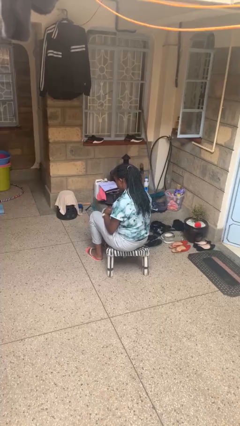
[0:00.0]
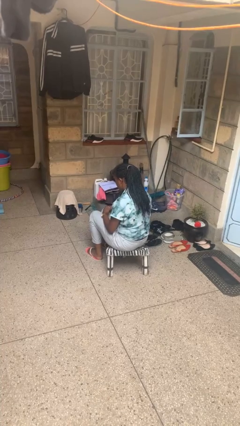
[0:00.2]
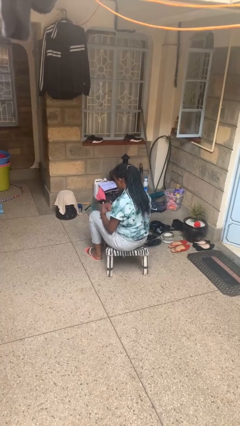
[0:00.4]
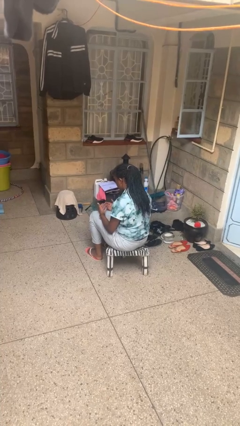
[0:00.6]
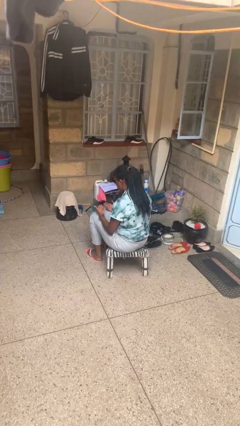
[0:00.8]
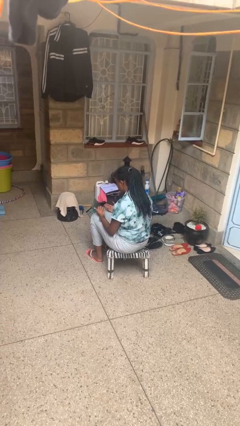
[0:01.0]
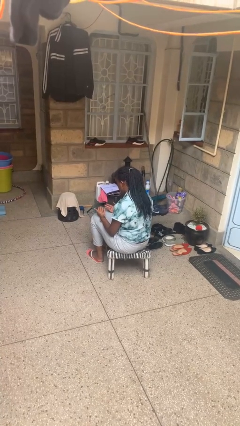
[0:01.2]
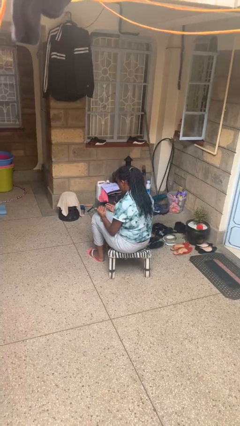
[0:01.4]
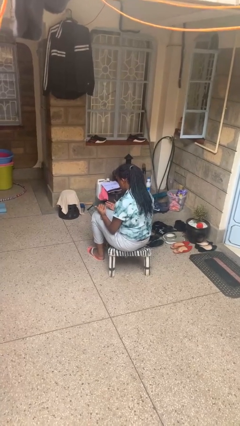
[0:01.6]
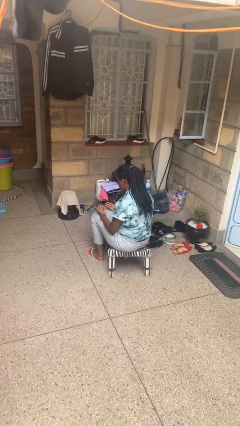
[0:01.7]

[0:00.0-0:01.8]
person looks at hands in lap

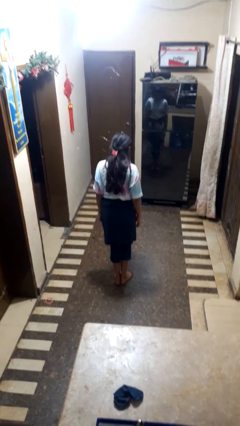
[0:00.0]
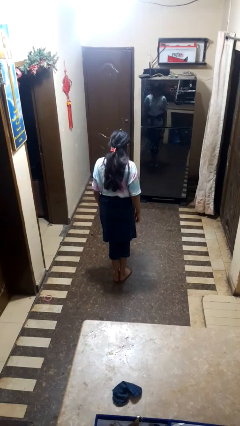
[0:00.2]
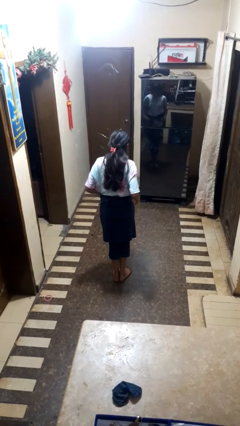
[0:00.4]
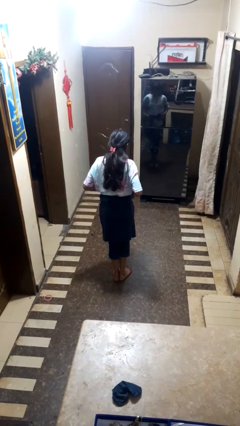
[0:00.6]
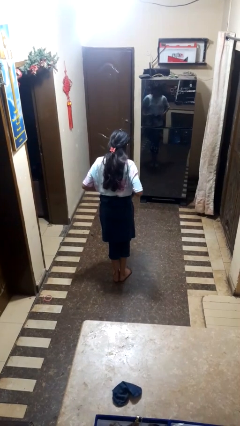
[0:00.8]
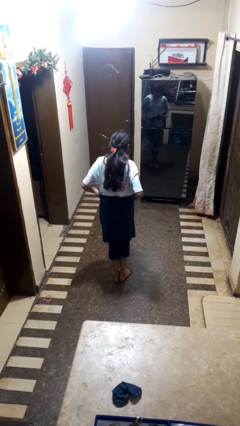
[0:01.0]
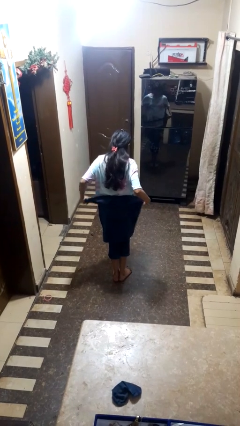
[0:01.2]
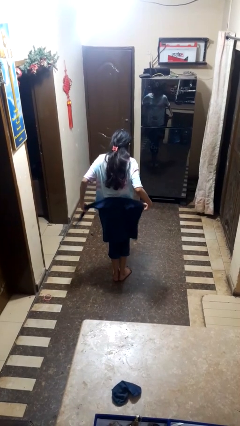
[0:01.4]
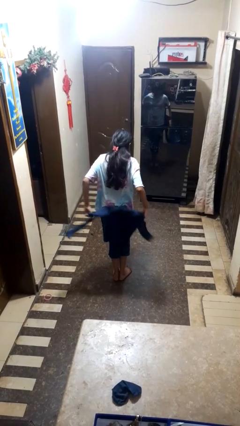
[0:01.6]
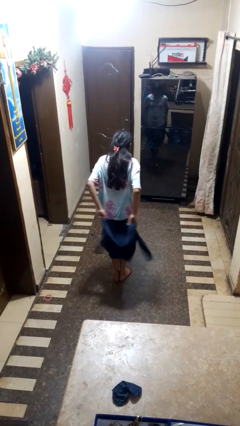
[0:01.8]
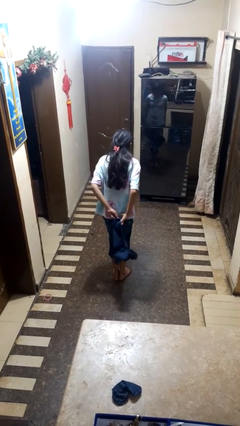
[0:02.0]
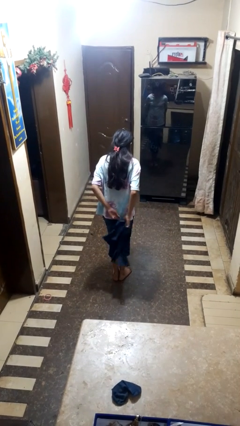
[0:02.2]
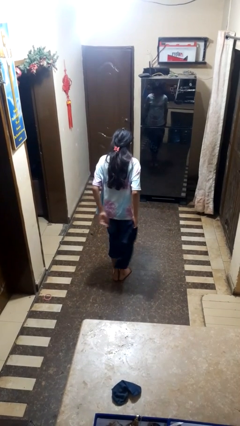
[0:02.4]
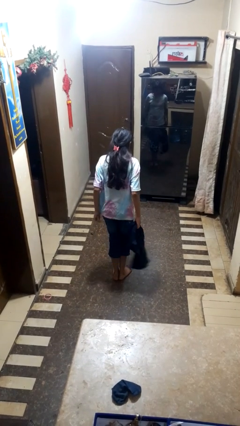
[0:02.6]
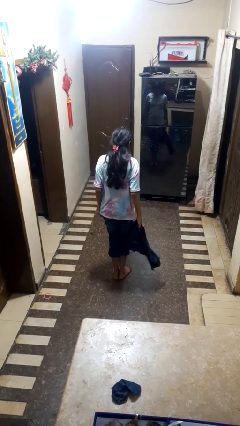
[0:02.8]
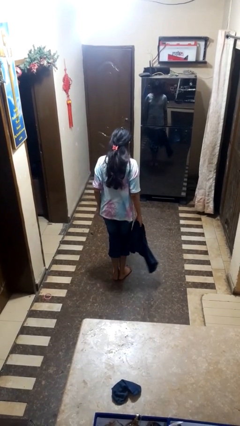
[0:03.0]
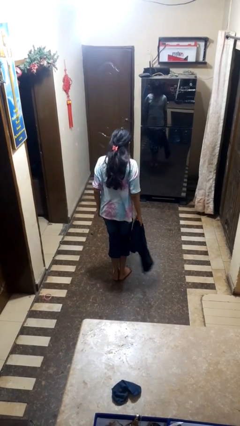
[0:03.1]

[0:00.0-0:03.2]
person unties jacket around waist

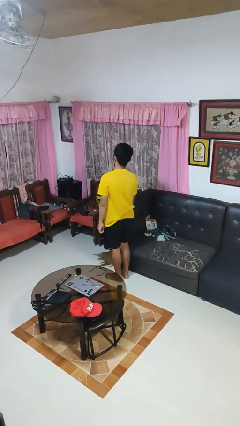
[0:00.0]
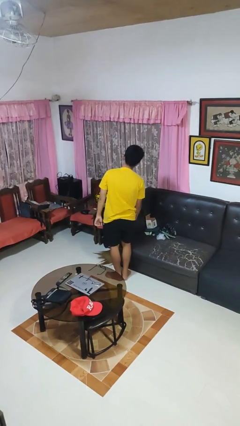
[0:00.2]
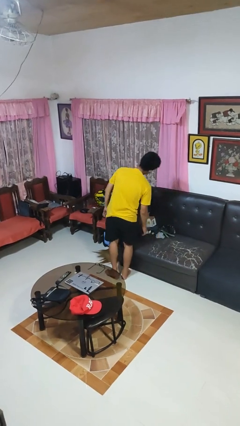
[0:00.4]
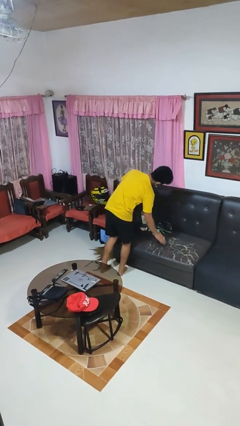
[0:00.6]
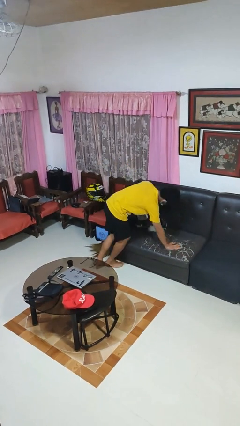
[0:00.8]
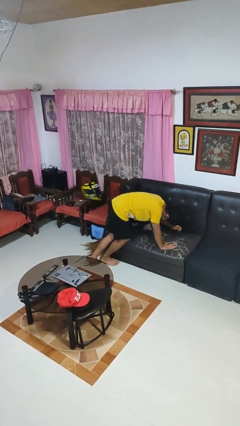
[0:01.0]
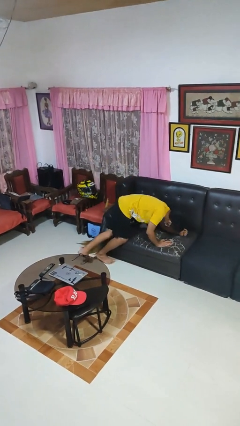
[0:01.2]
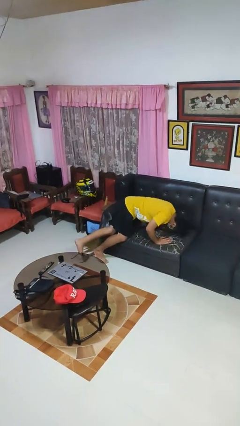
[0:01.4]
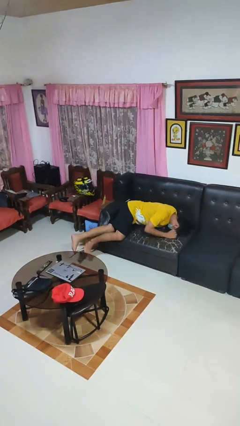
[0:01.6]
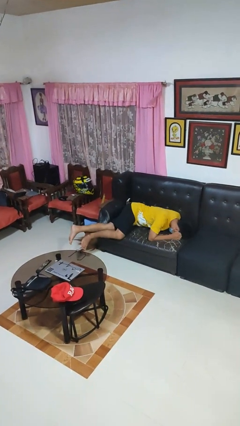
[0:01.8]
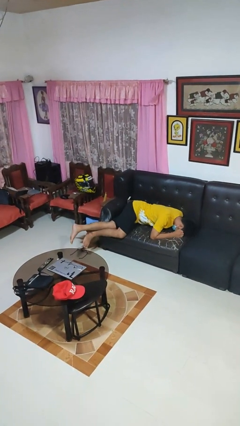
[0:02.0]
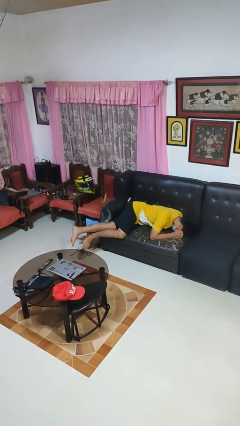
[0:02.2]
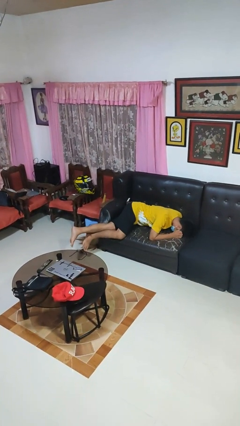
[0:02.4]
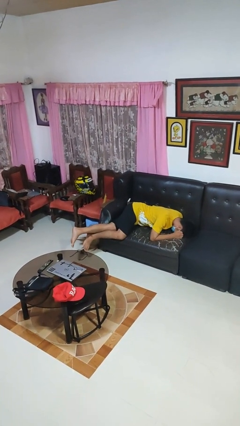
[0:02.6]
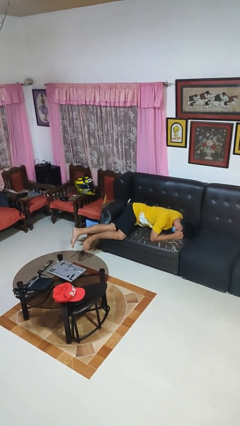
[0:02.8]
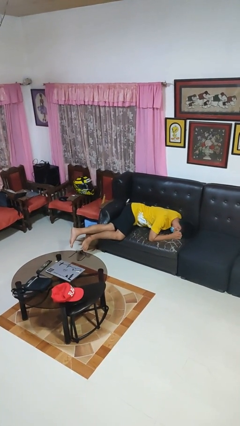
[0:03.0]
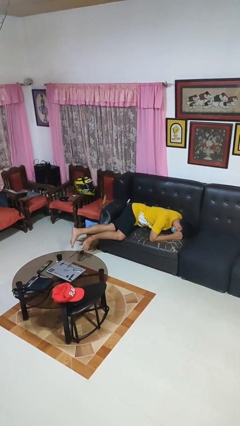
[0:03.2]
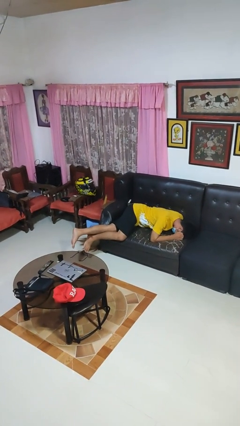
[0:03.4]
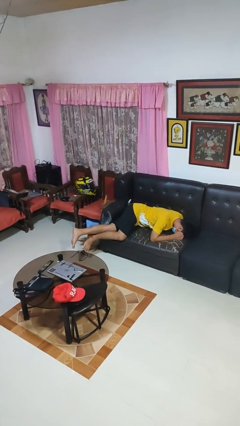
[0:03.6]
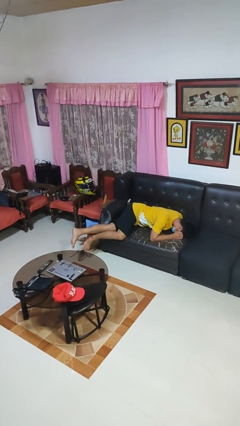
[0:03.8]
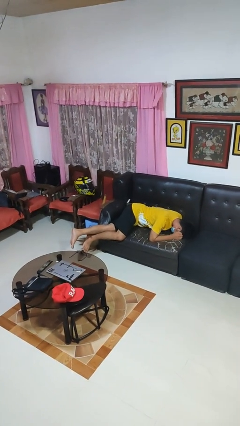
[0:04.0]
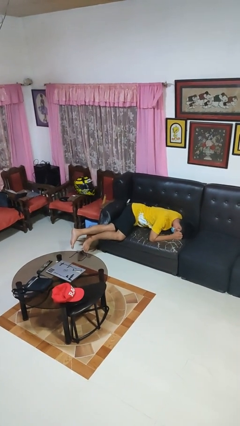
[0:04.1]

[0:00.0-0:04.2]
person lies down on couch

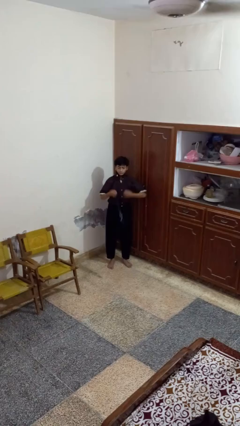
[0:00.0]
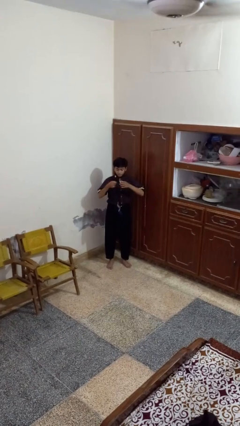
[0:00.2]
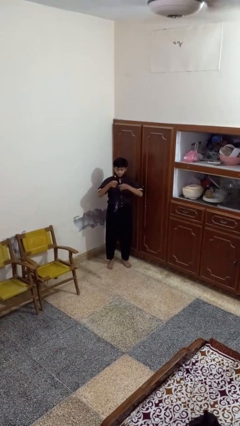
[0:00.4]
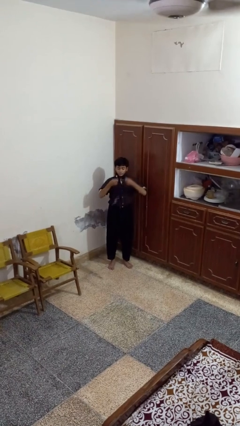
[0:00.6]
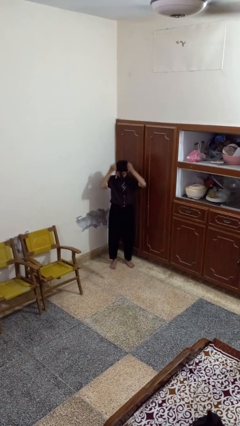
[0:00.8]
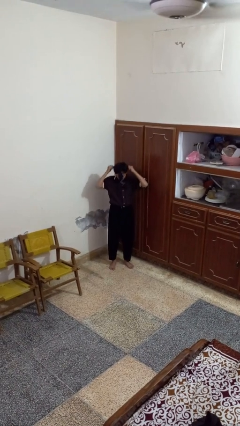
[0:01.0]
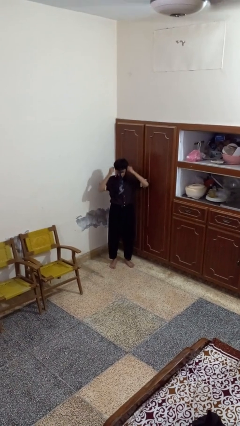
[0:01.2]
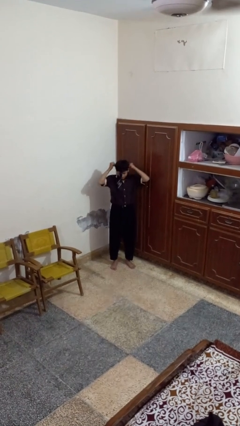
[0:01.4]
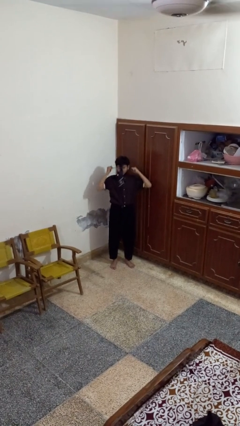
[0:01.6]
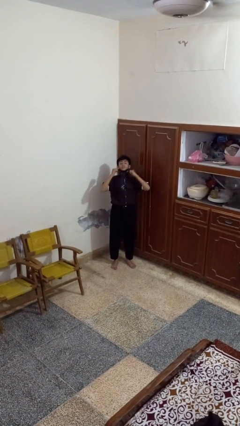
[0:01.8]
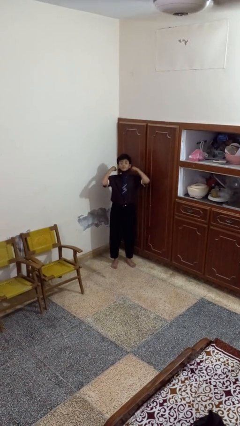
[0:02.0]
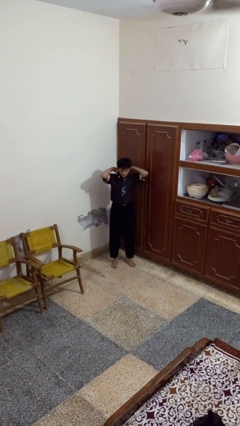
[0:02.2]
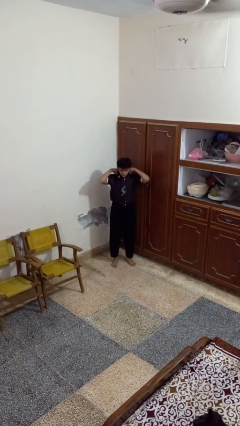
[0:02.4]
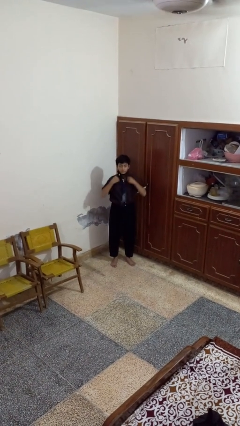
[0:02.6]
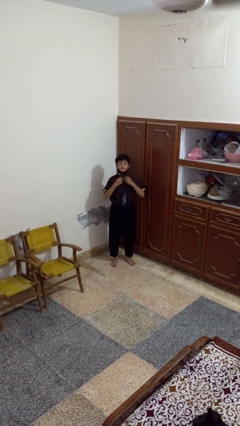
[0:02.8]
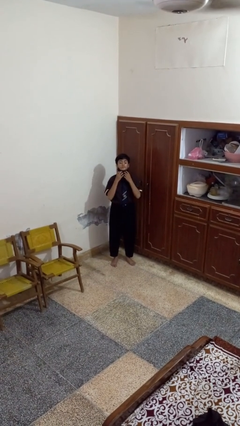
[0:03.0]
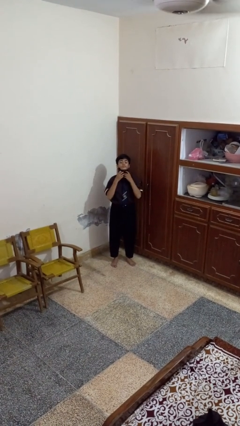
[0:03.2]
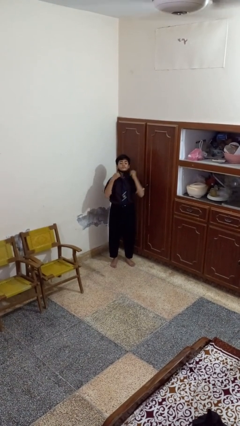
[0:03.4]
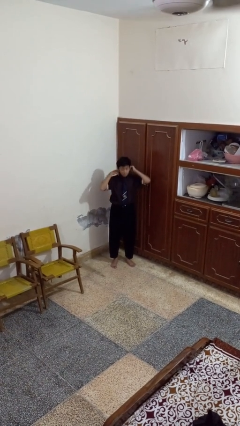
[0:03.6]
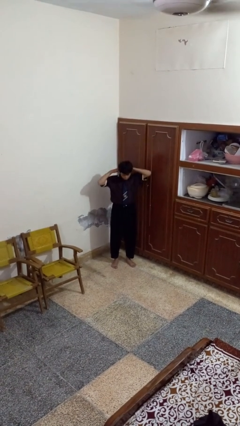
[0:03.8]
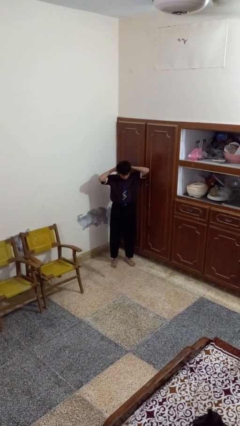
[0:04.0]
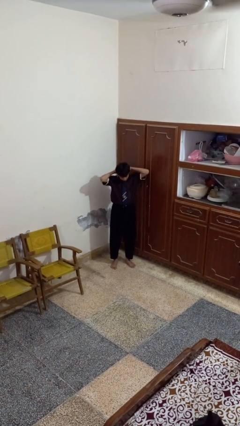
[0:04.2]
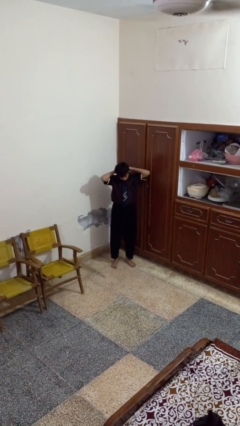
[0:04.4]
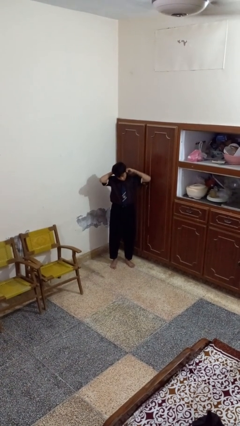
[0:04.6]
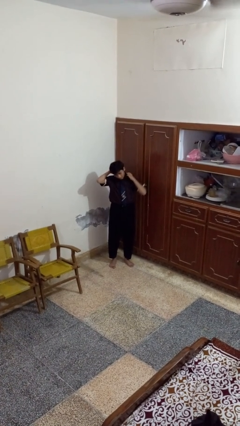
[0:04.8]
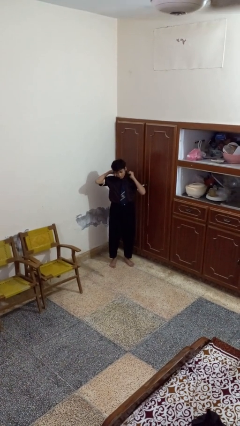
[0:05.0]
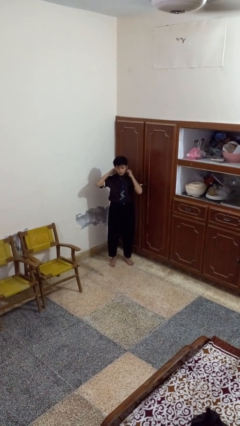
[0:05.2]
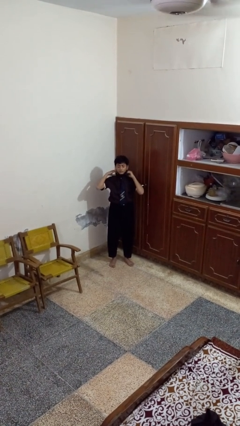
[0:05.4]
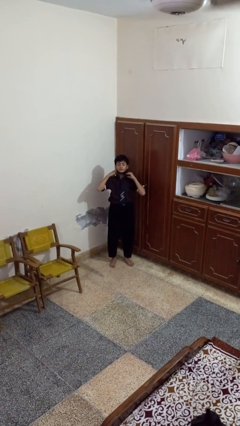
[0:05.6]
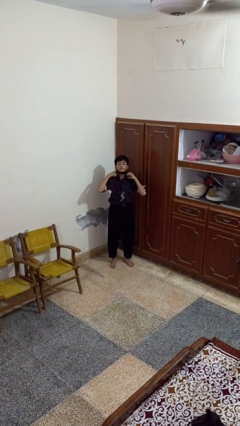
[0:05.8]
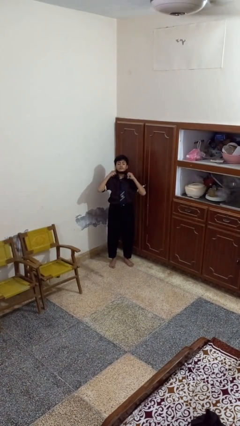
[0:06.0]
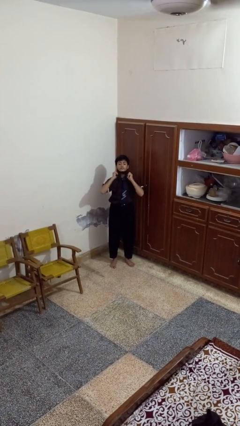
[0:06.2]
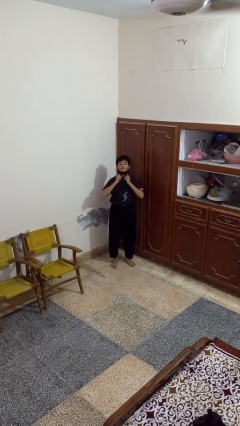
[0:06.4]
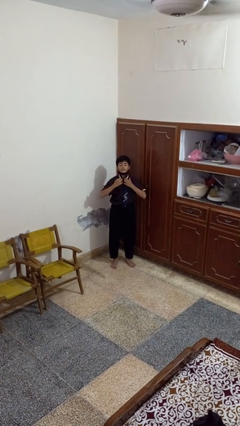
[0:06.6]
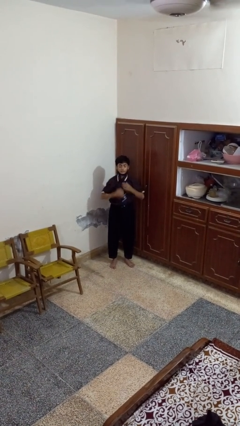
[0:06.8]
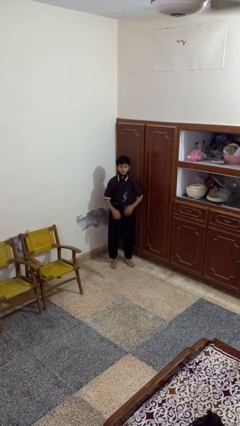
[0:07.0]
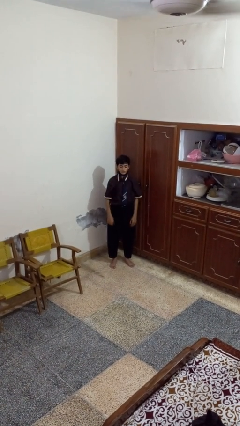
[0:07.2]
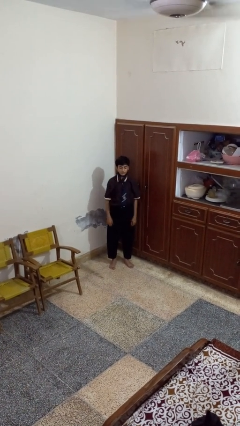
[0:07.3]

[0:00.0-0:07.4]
person puts on necktie

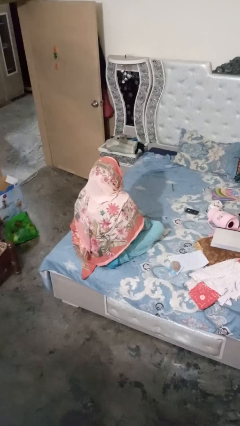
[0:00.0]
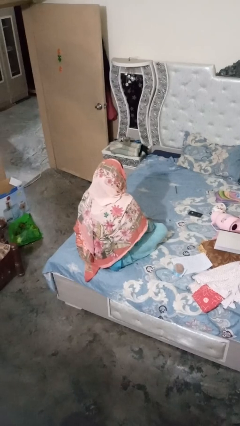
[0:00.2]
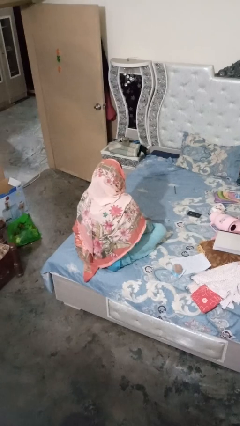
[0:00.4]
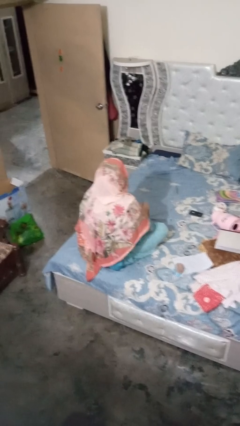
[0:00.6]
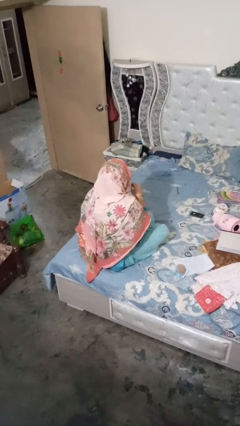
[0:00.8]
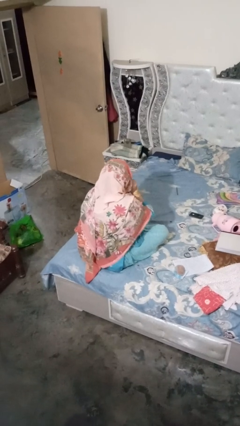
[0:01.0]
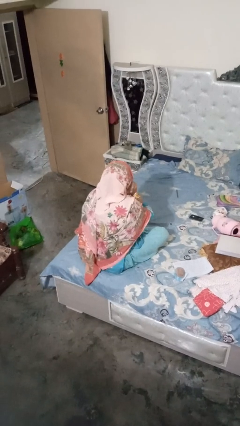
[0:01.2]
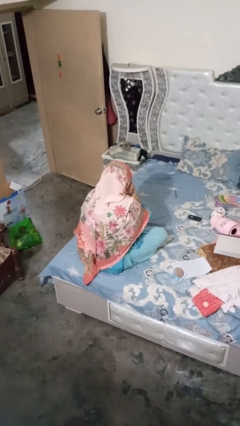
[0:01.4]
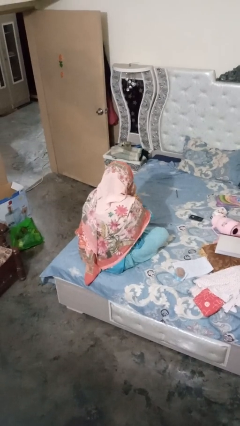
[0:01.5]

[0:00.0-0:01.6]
person gestures listen closely
